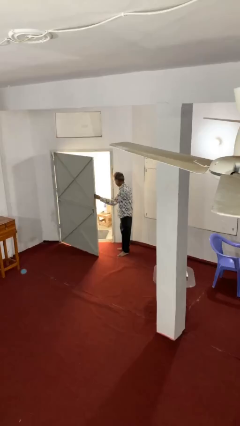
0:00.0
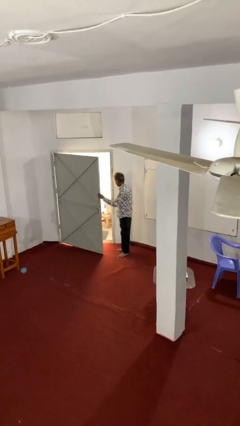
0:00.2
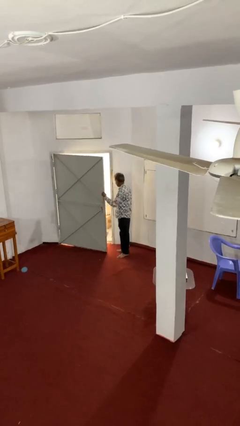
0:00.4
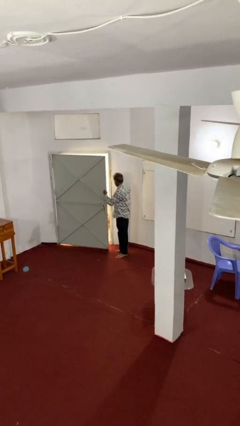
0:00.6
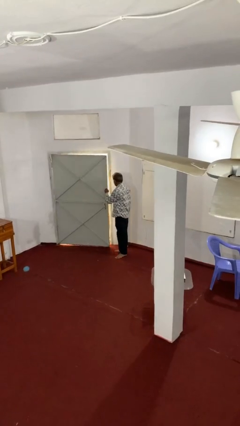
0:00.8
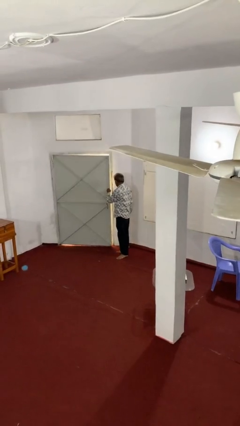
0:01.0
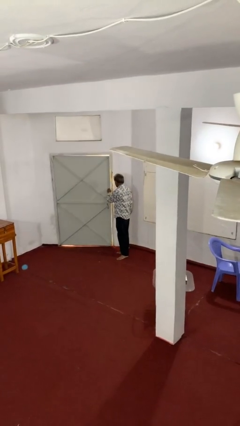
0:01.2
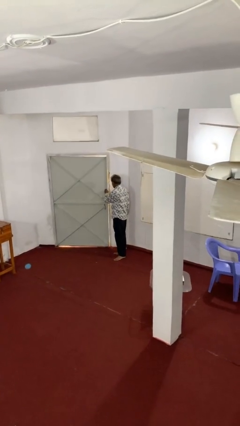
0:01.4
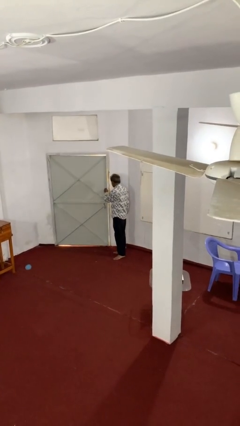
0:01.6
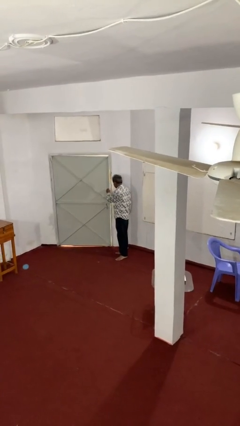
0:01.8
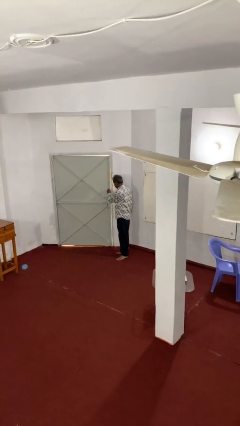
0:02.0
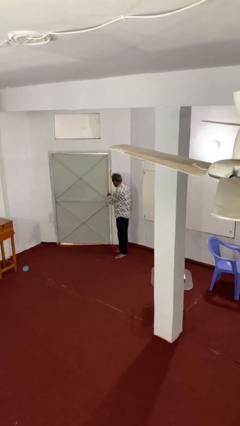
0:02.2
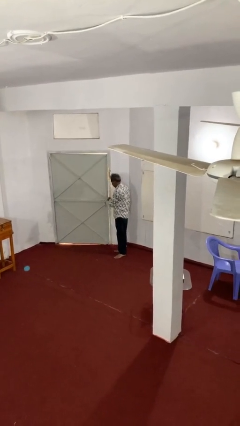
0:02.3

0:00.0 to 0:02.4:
person closes facility door

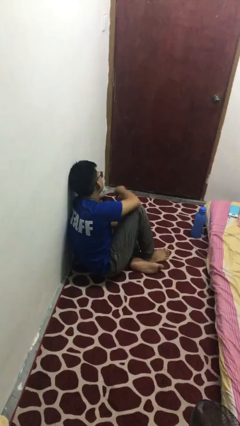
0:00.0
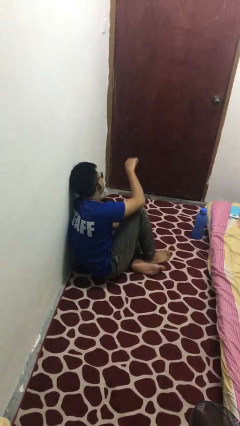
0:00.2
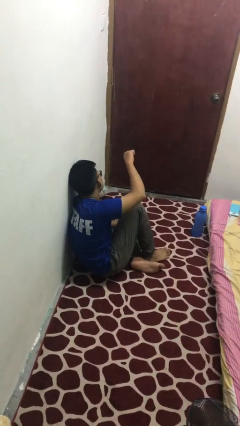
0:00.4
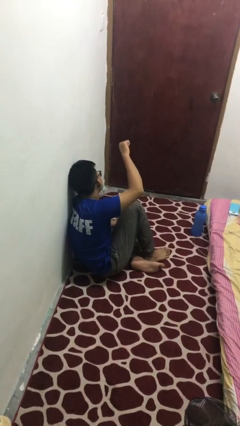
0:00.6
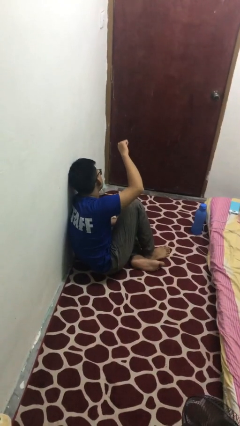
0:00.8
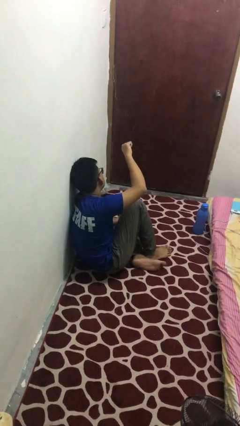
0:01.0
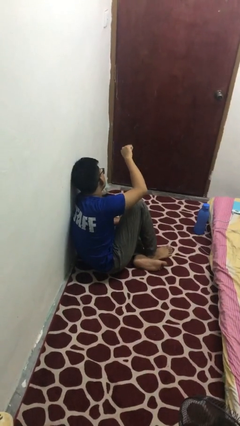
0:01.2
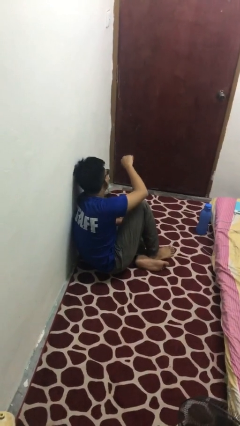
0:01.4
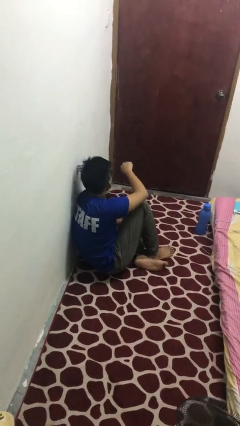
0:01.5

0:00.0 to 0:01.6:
person gestures thumbs down

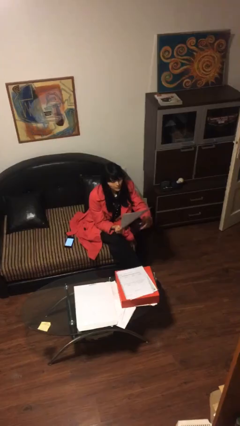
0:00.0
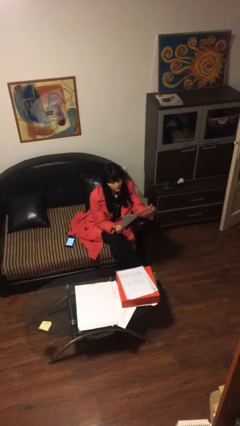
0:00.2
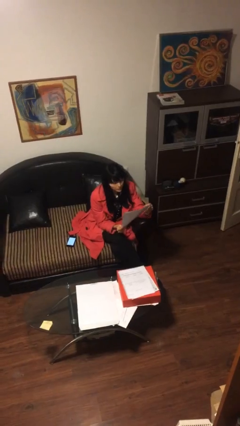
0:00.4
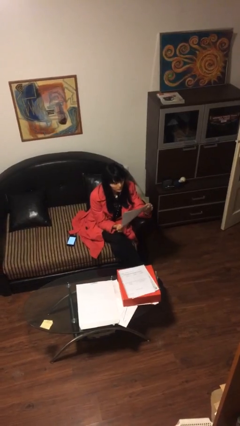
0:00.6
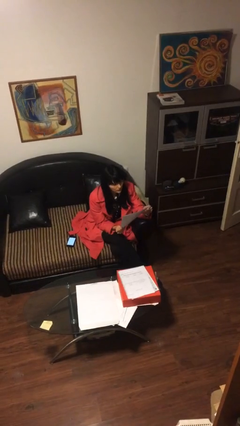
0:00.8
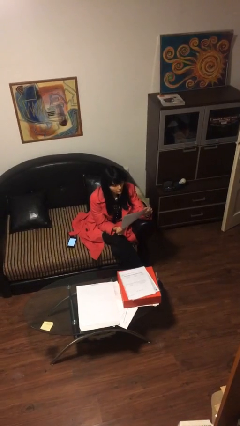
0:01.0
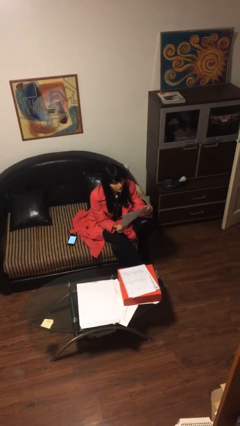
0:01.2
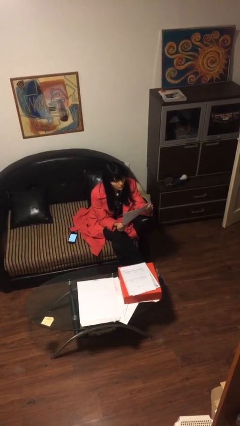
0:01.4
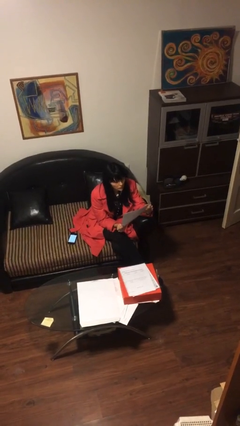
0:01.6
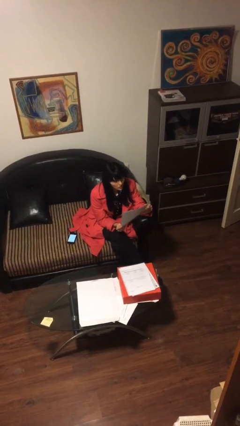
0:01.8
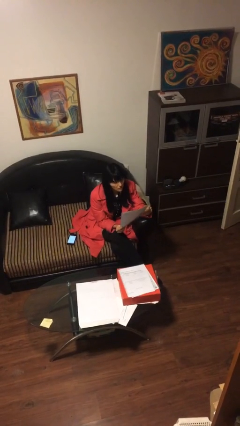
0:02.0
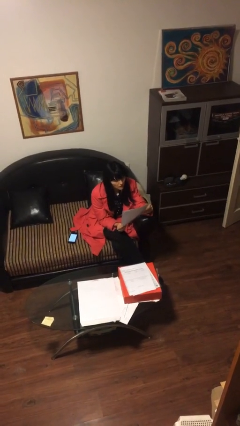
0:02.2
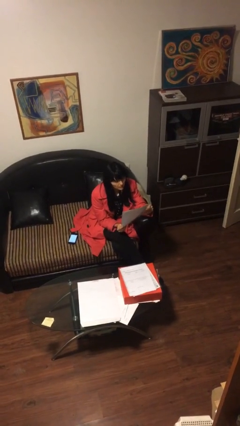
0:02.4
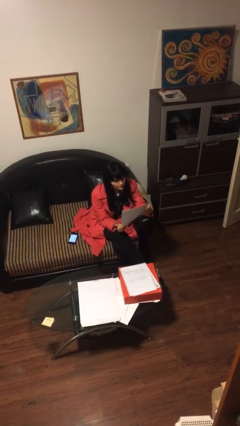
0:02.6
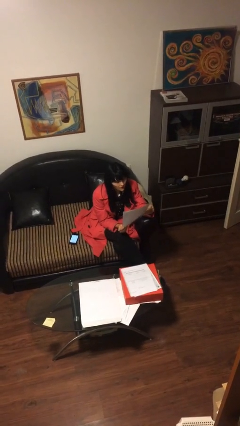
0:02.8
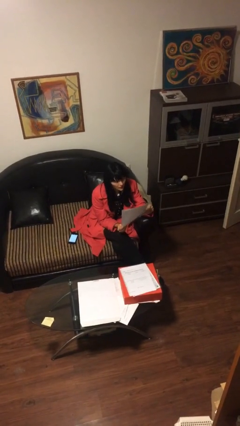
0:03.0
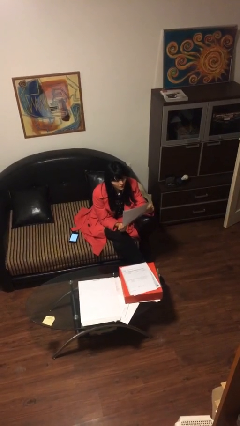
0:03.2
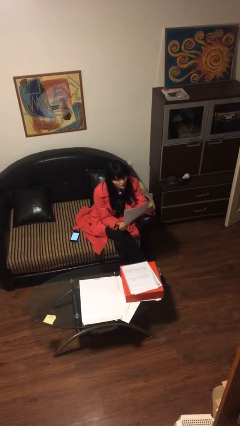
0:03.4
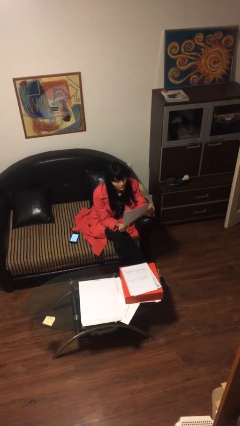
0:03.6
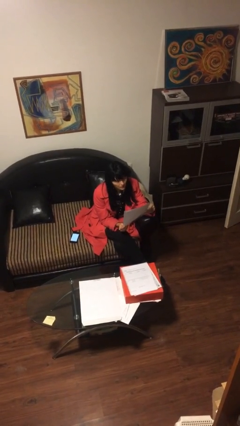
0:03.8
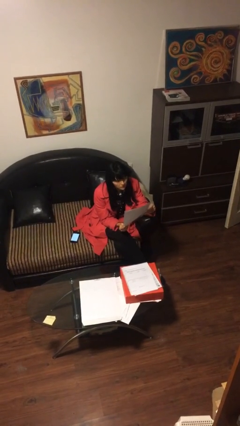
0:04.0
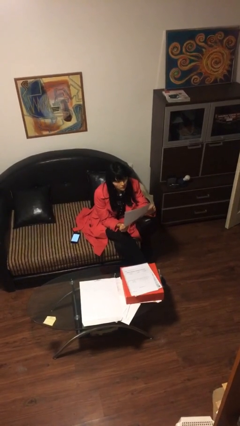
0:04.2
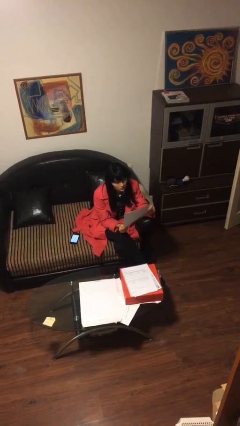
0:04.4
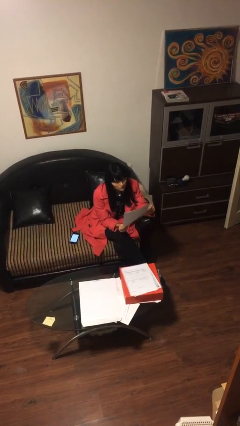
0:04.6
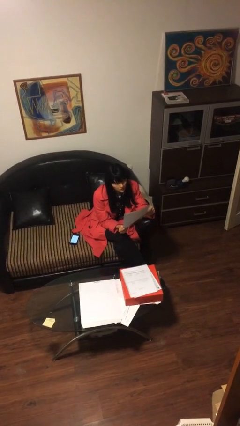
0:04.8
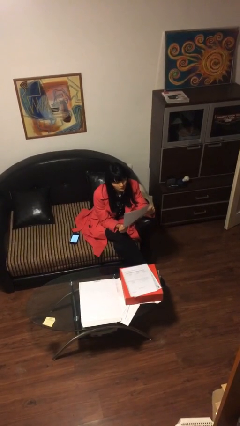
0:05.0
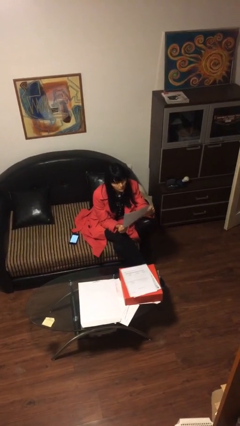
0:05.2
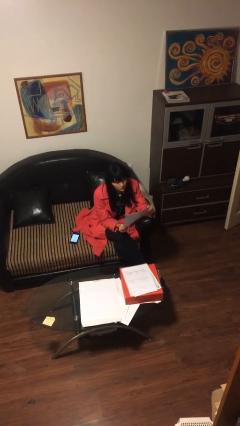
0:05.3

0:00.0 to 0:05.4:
person reads document

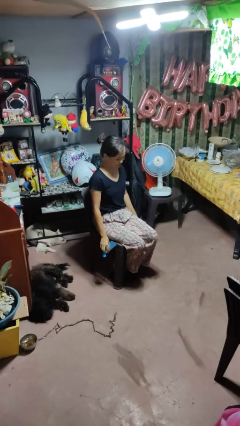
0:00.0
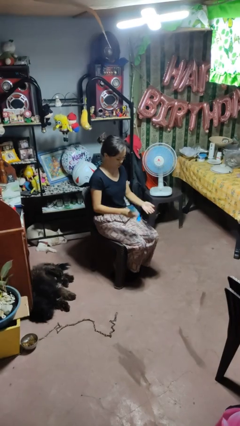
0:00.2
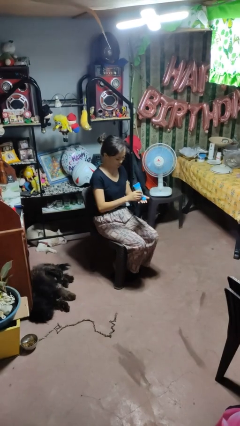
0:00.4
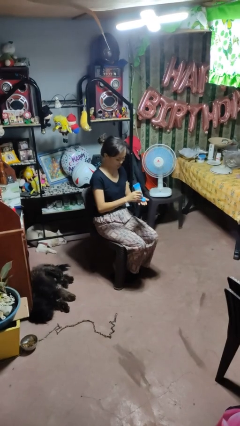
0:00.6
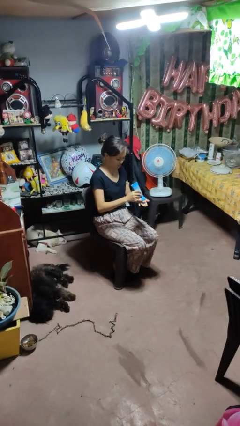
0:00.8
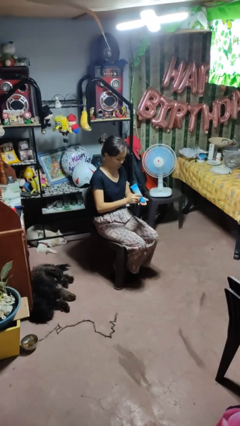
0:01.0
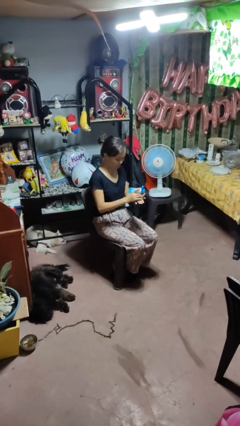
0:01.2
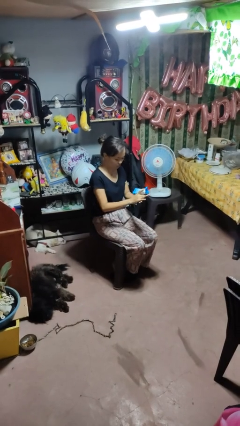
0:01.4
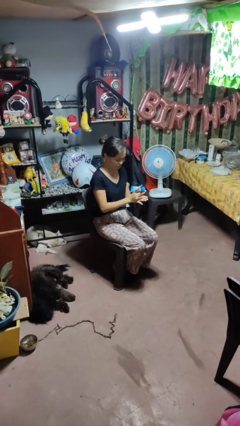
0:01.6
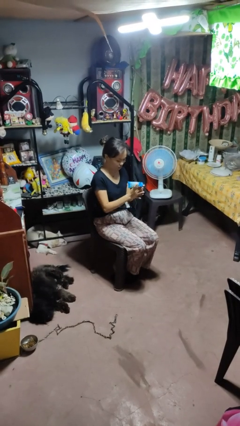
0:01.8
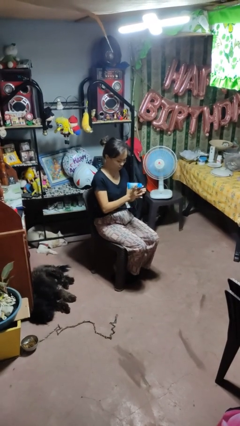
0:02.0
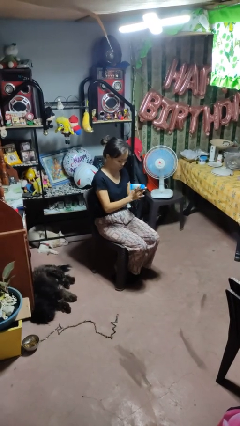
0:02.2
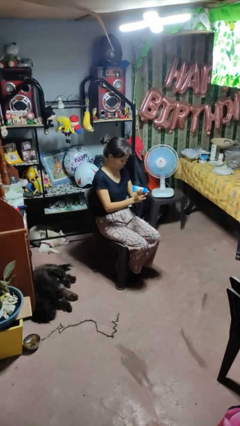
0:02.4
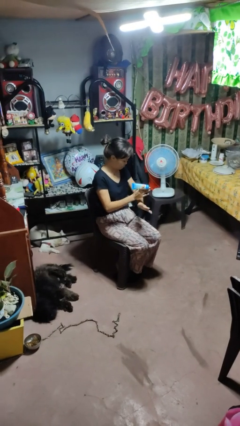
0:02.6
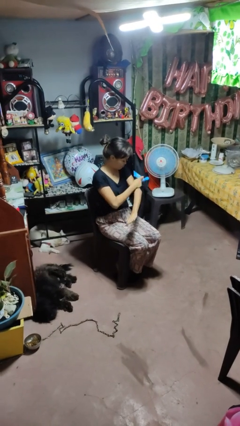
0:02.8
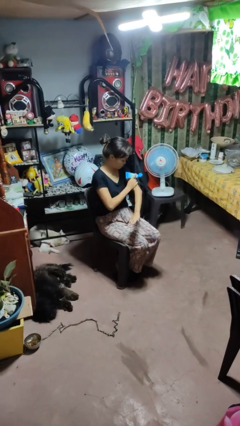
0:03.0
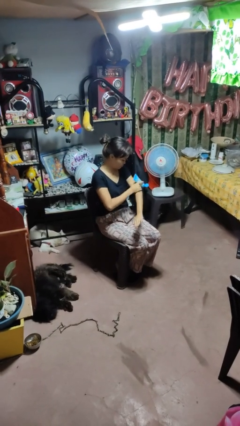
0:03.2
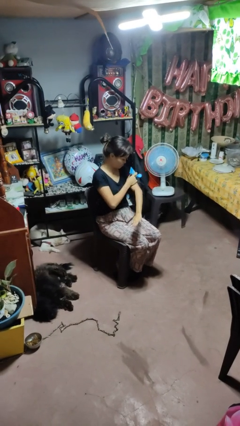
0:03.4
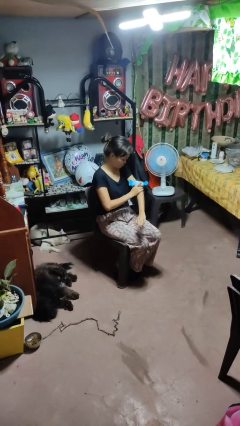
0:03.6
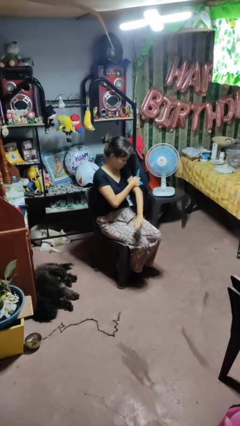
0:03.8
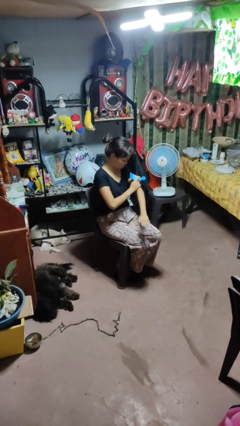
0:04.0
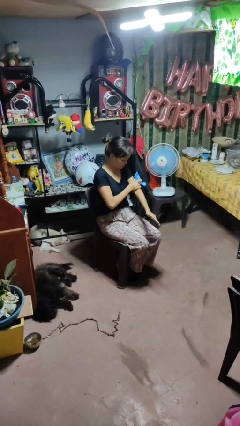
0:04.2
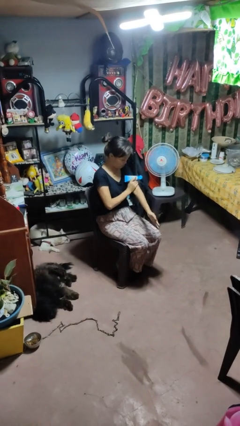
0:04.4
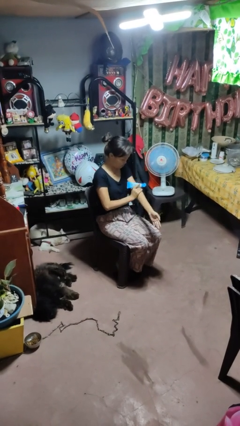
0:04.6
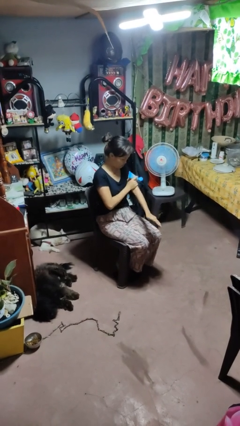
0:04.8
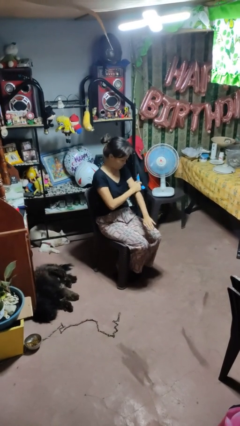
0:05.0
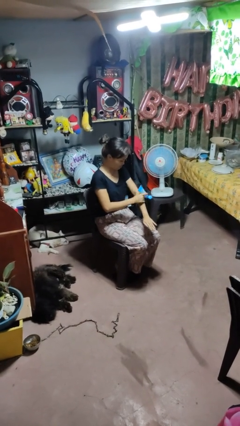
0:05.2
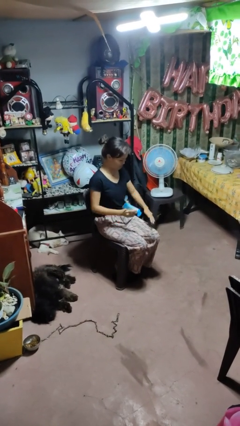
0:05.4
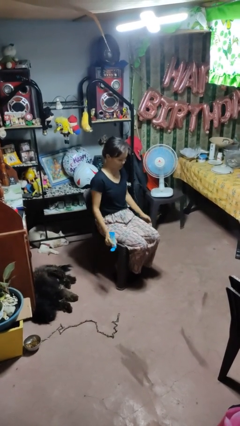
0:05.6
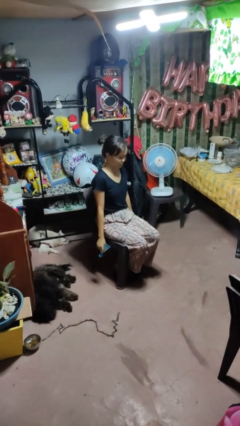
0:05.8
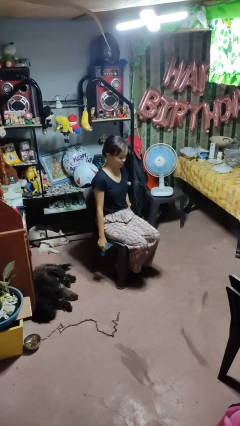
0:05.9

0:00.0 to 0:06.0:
person applies sunscreen

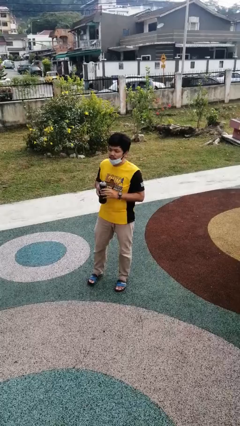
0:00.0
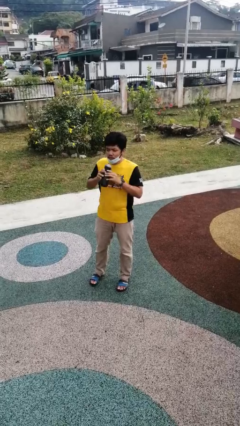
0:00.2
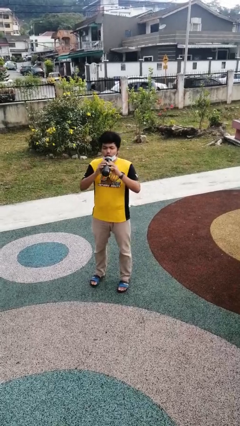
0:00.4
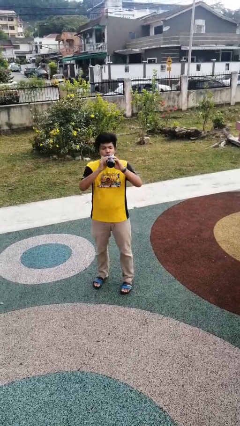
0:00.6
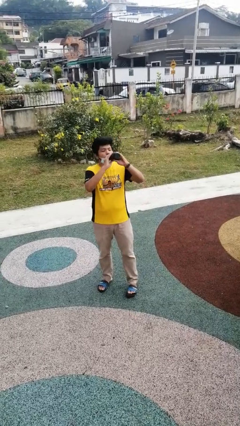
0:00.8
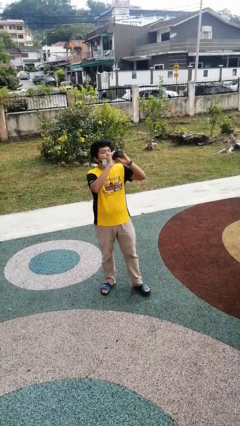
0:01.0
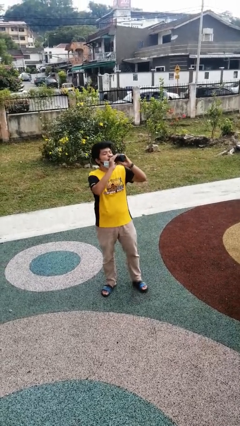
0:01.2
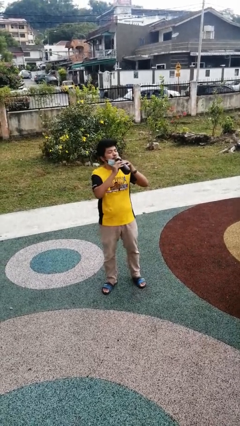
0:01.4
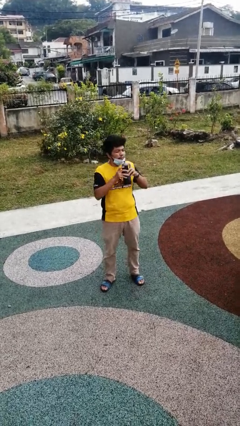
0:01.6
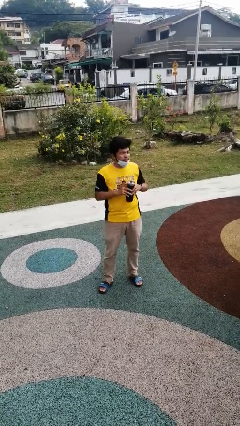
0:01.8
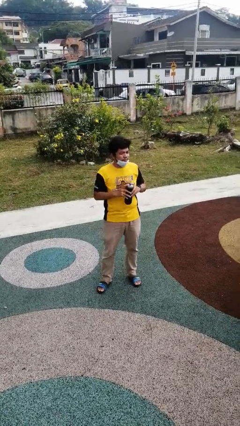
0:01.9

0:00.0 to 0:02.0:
person drinks from bottle
